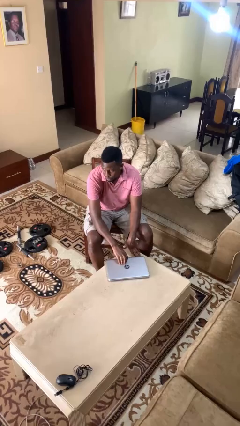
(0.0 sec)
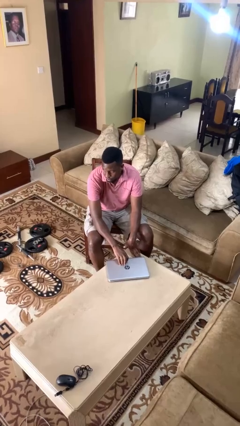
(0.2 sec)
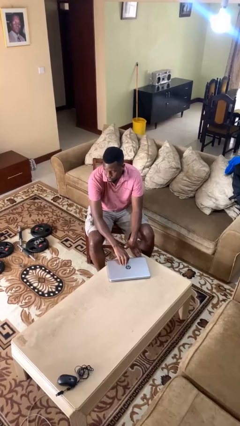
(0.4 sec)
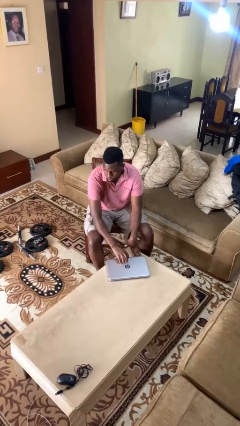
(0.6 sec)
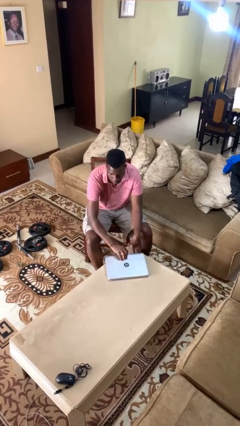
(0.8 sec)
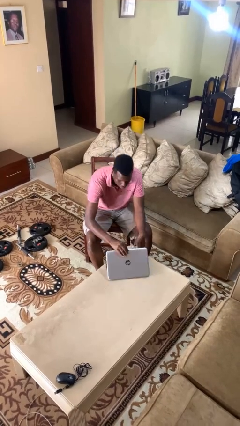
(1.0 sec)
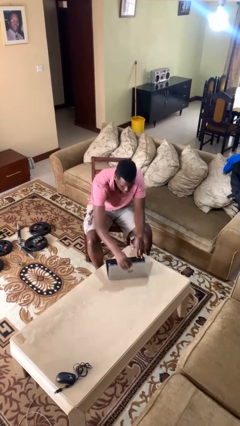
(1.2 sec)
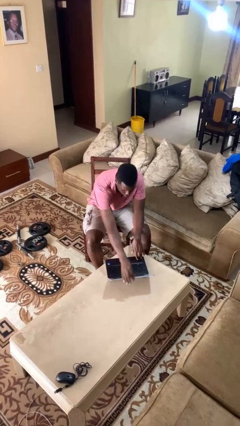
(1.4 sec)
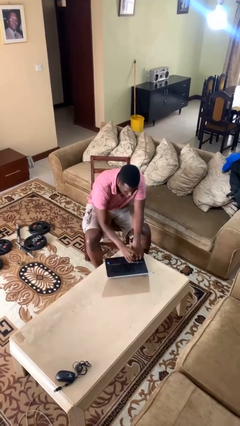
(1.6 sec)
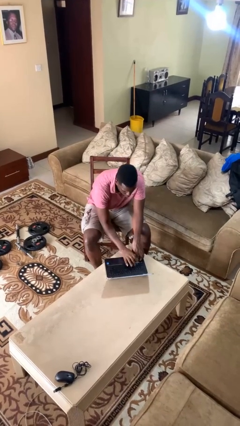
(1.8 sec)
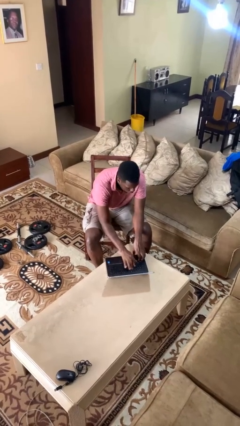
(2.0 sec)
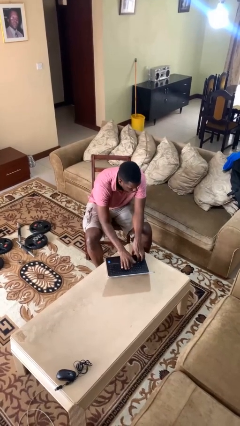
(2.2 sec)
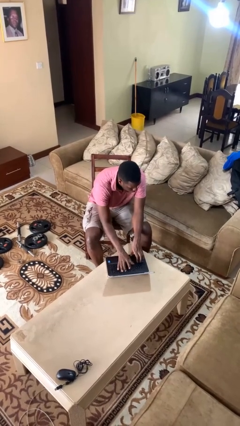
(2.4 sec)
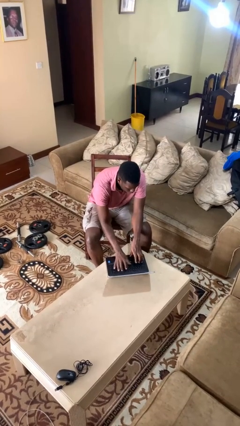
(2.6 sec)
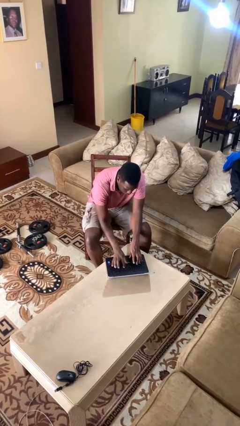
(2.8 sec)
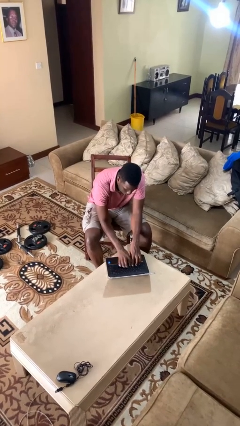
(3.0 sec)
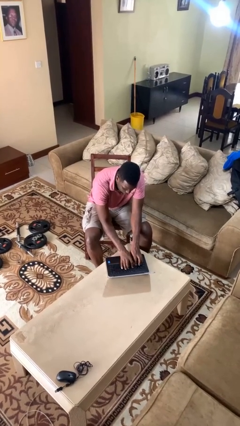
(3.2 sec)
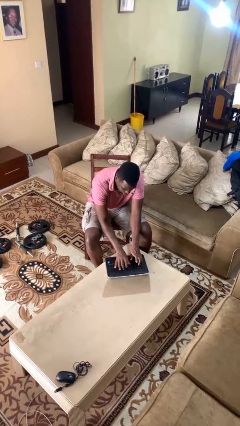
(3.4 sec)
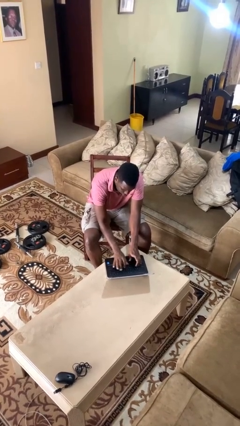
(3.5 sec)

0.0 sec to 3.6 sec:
person interacts with laptop

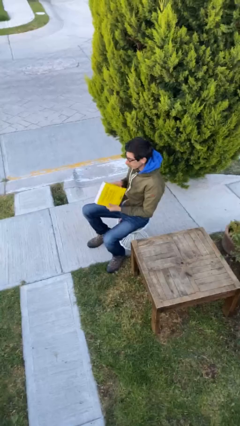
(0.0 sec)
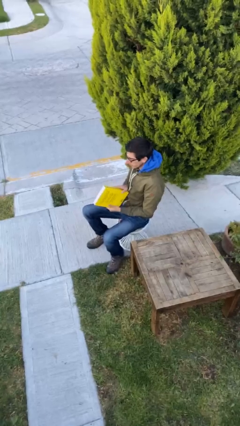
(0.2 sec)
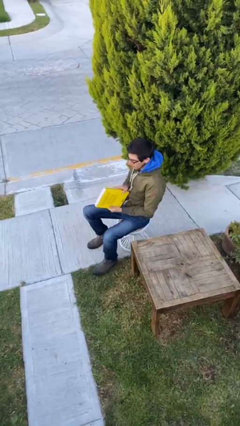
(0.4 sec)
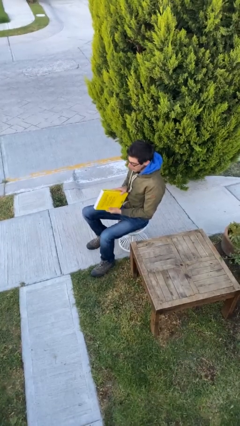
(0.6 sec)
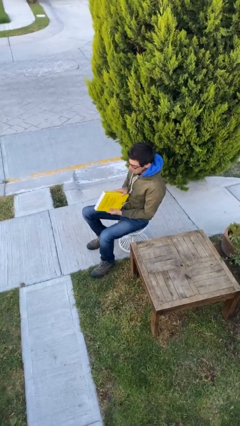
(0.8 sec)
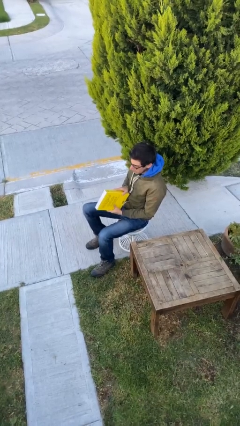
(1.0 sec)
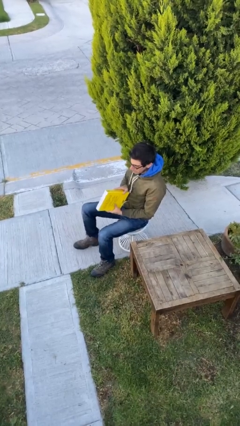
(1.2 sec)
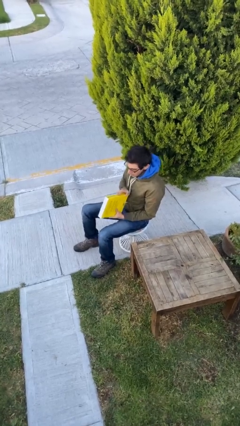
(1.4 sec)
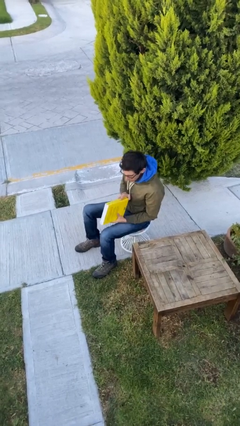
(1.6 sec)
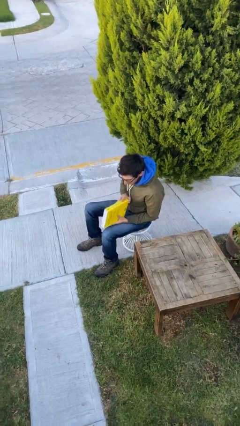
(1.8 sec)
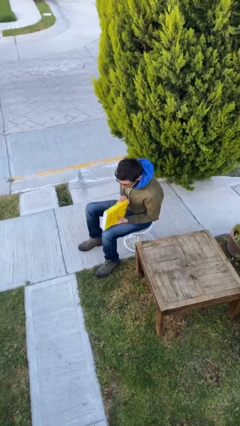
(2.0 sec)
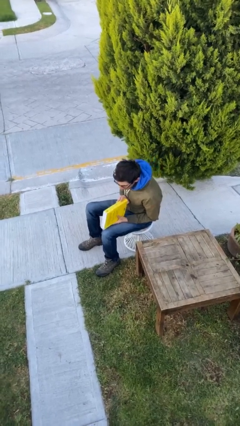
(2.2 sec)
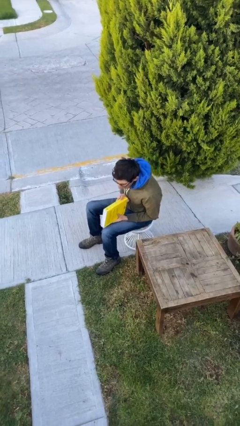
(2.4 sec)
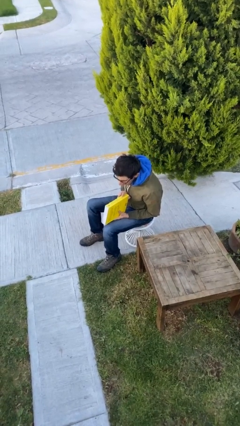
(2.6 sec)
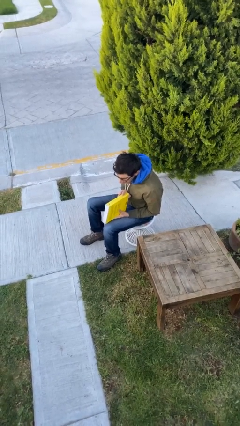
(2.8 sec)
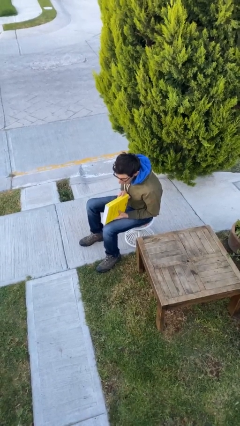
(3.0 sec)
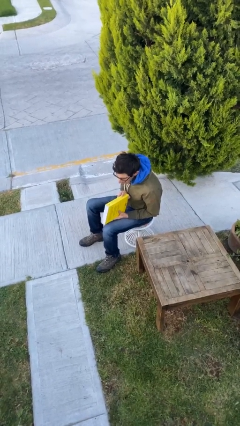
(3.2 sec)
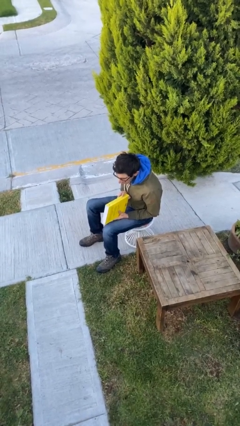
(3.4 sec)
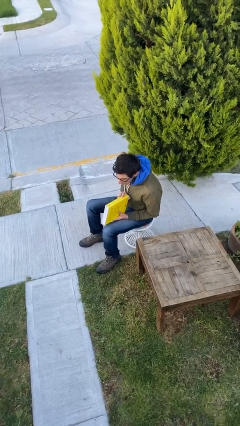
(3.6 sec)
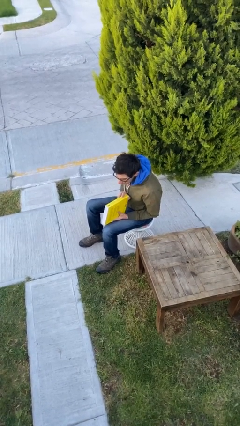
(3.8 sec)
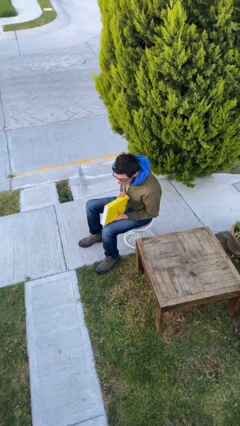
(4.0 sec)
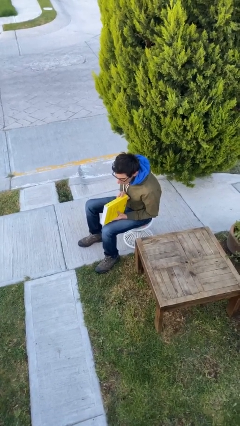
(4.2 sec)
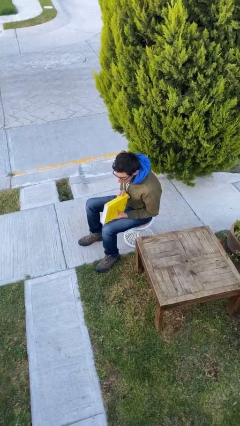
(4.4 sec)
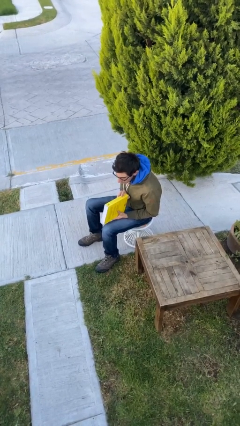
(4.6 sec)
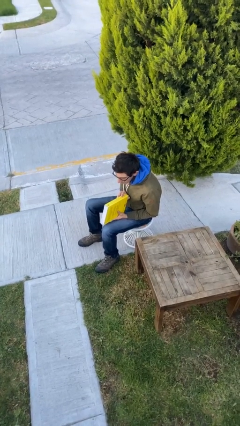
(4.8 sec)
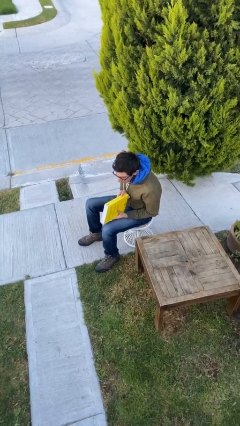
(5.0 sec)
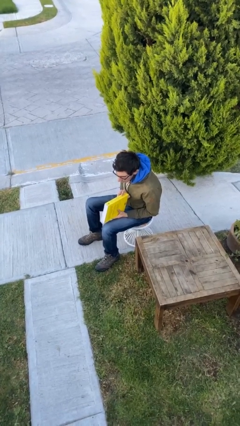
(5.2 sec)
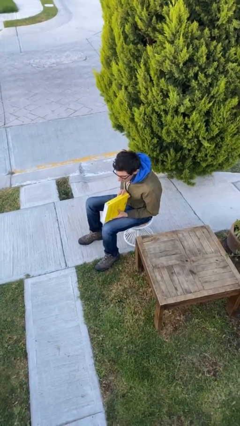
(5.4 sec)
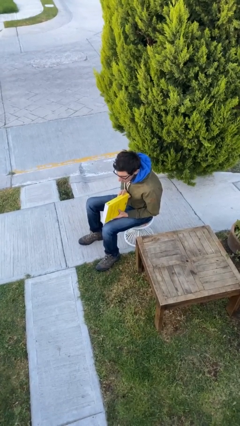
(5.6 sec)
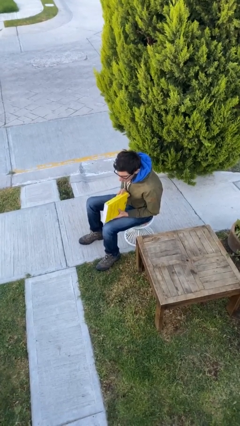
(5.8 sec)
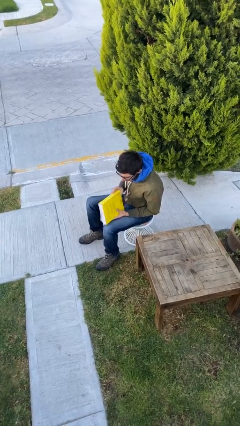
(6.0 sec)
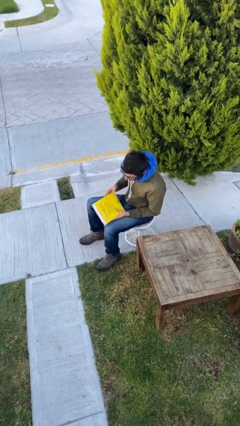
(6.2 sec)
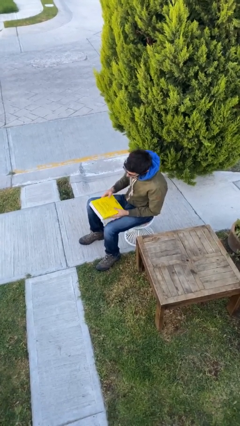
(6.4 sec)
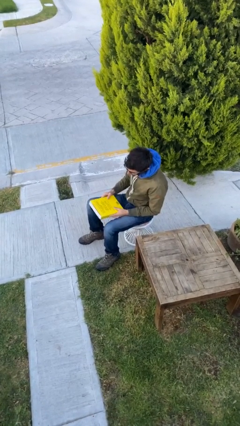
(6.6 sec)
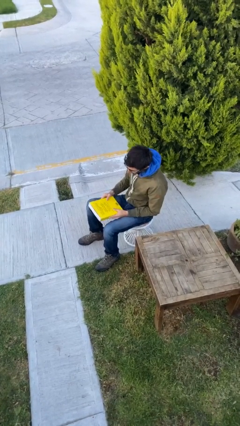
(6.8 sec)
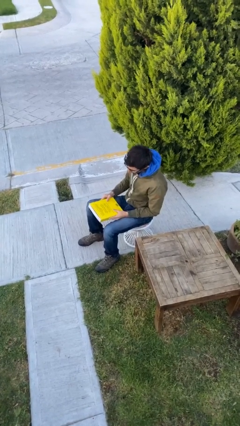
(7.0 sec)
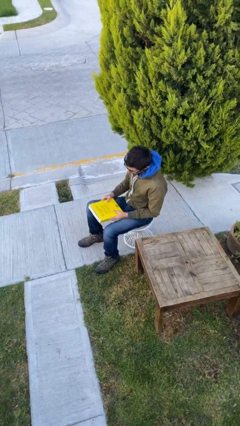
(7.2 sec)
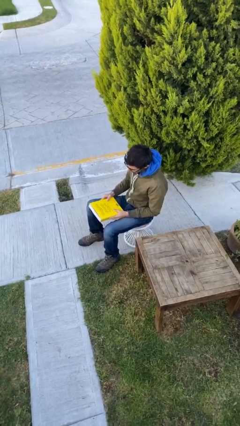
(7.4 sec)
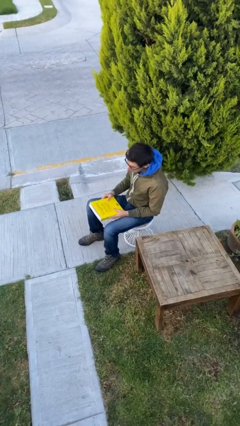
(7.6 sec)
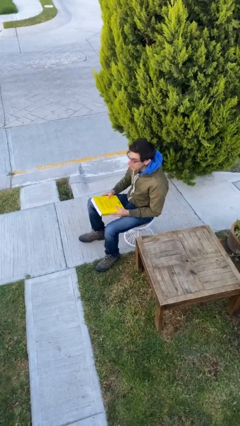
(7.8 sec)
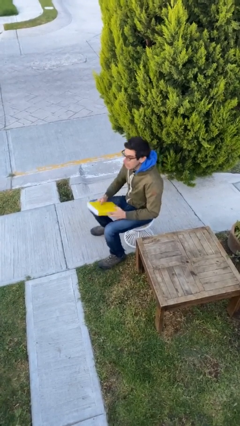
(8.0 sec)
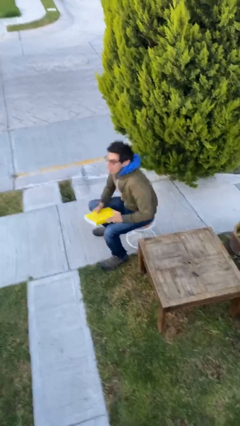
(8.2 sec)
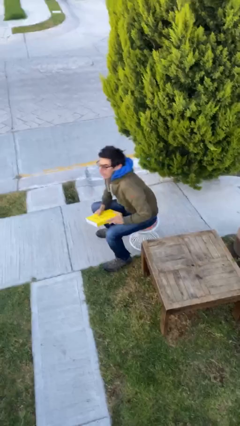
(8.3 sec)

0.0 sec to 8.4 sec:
person reads document

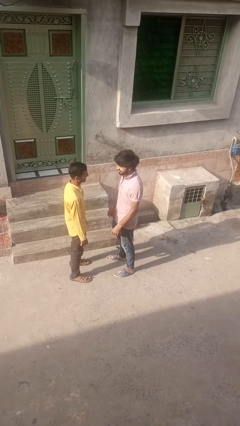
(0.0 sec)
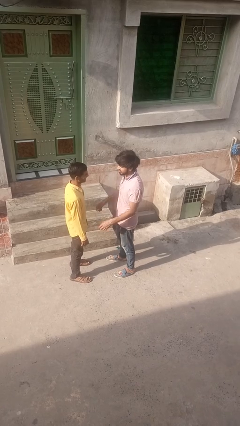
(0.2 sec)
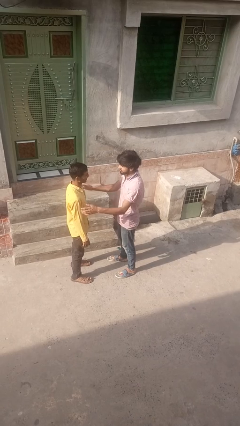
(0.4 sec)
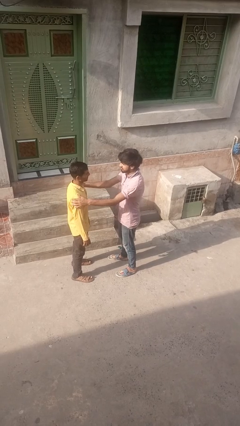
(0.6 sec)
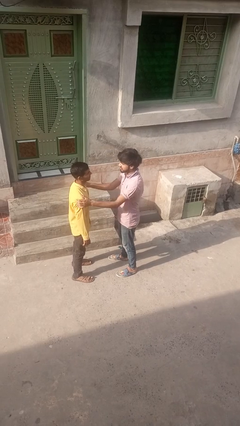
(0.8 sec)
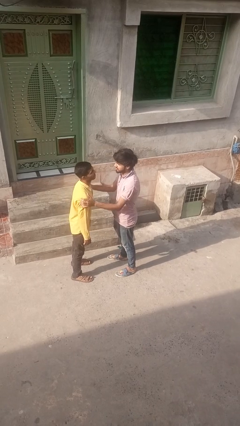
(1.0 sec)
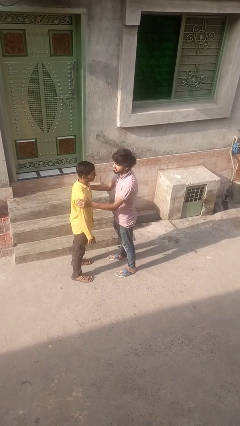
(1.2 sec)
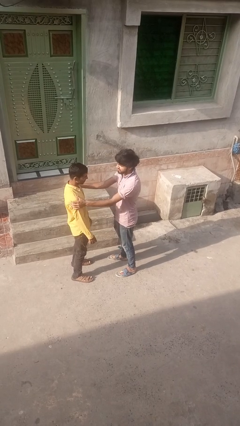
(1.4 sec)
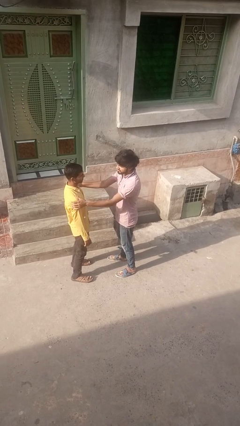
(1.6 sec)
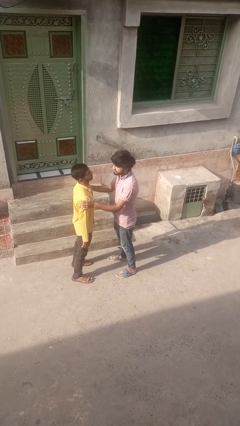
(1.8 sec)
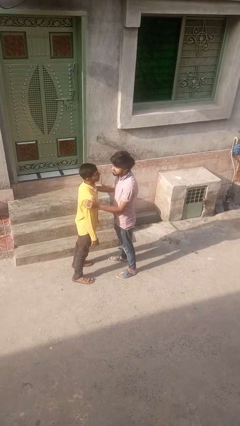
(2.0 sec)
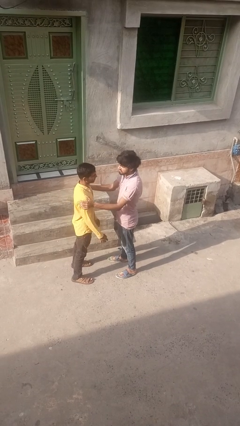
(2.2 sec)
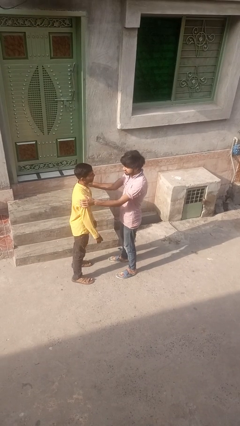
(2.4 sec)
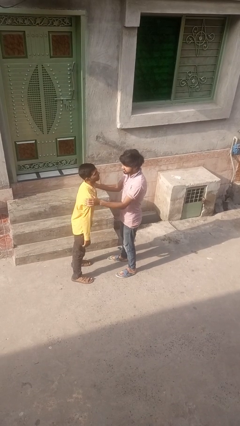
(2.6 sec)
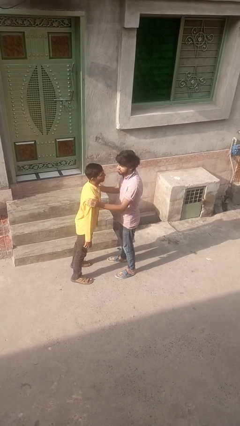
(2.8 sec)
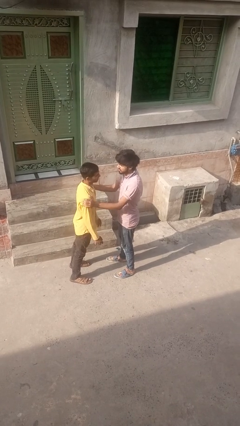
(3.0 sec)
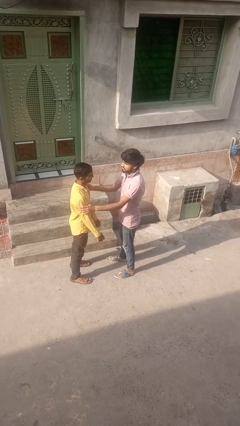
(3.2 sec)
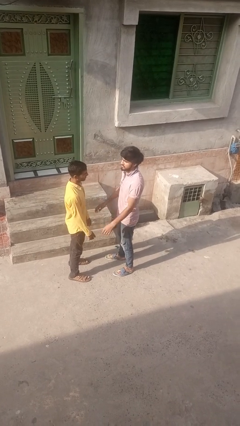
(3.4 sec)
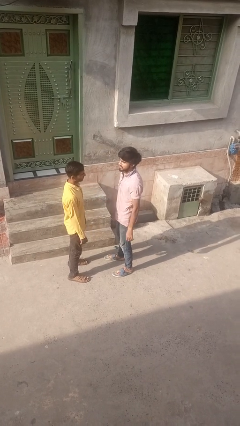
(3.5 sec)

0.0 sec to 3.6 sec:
person grabs person by bicep

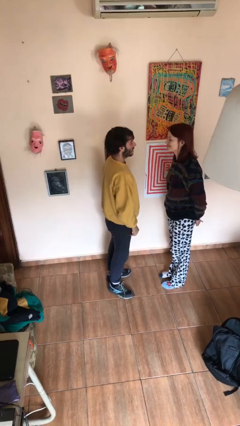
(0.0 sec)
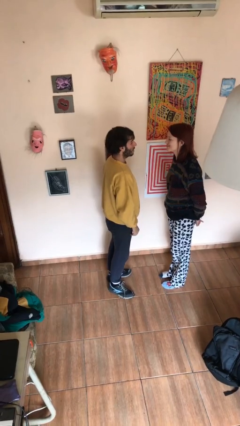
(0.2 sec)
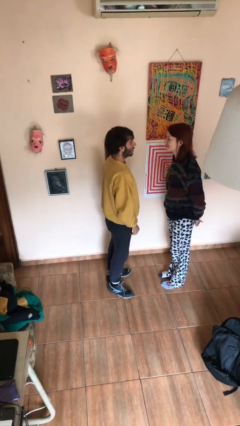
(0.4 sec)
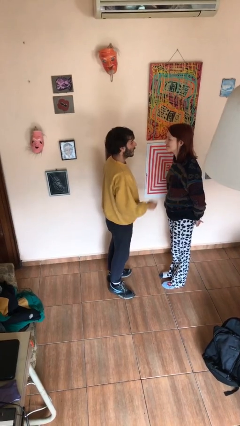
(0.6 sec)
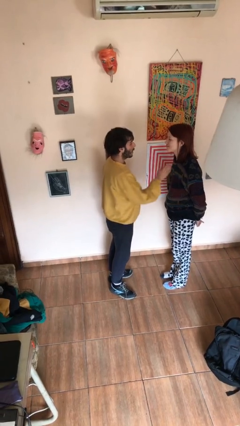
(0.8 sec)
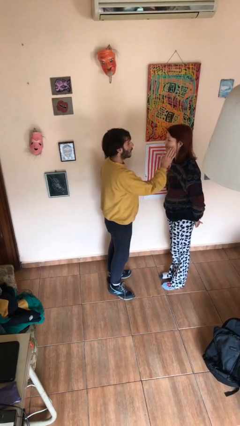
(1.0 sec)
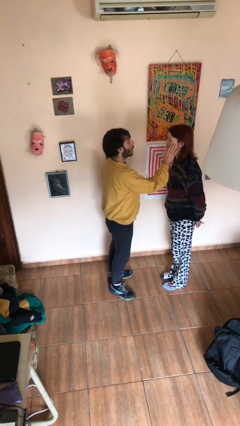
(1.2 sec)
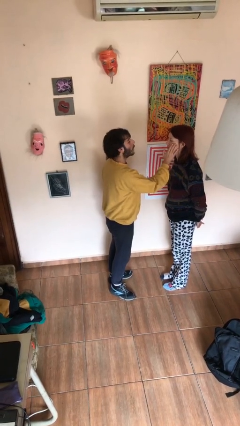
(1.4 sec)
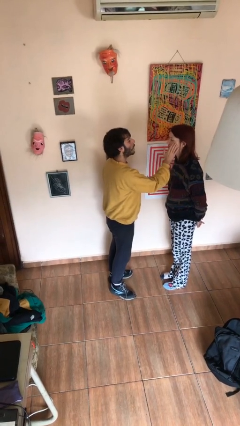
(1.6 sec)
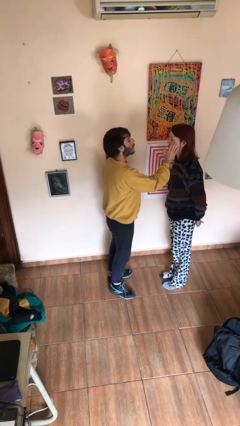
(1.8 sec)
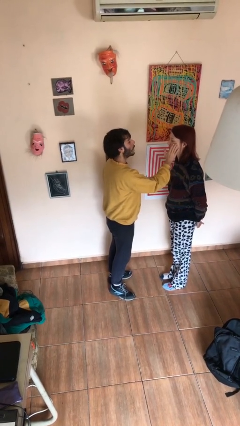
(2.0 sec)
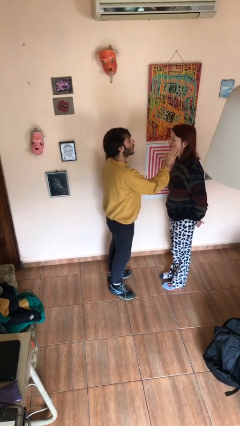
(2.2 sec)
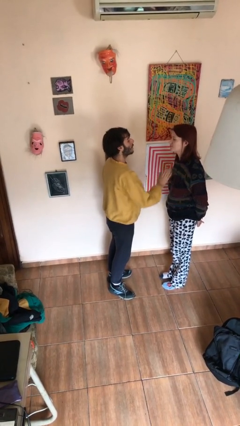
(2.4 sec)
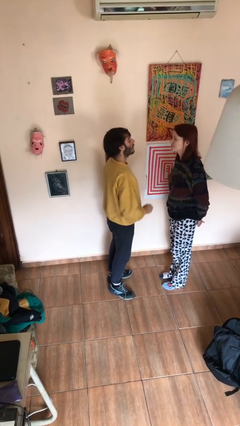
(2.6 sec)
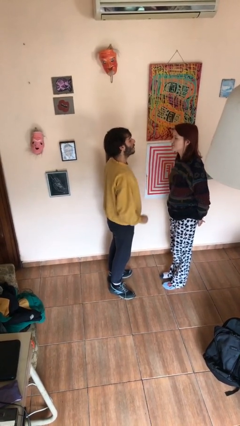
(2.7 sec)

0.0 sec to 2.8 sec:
person touches face of person
